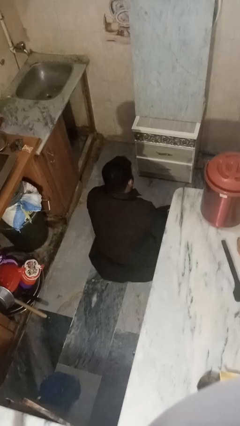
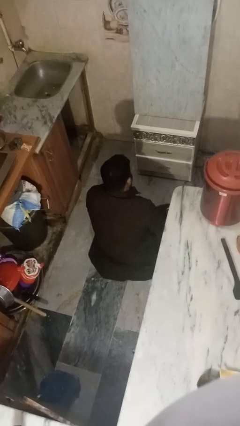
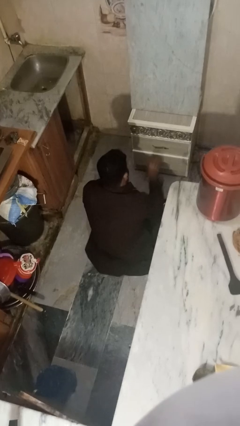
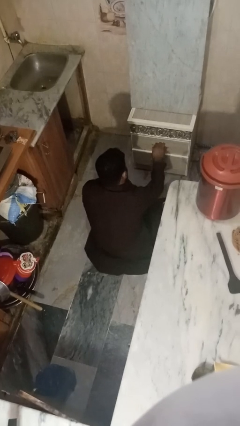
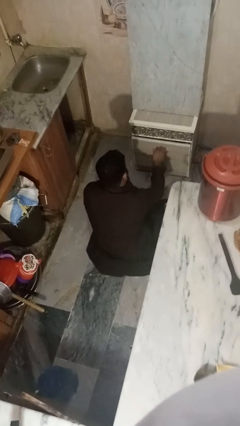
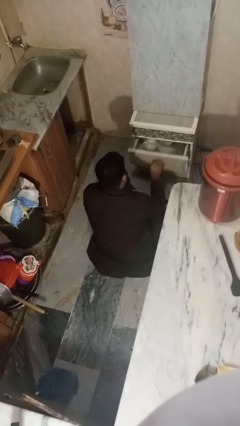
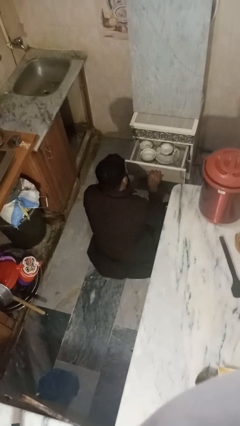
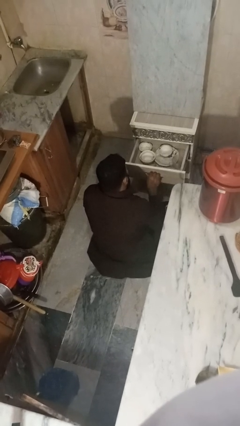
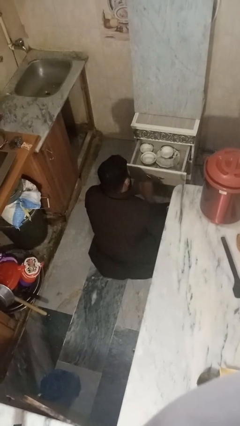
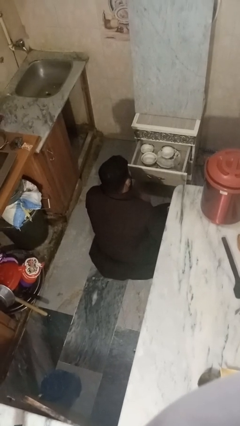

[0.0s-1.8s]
person opens kitchen drawer

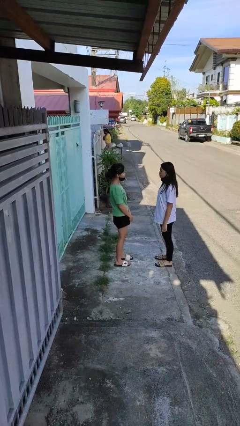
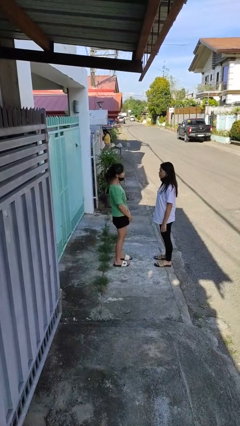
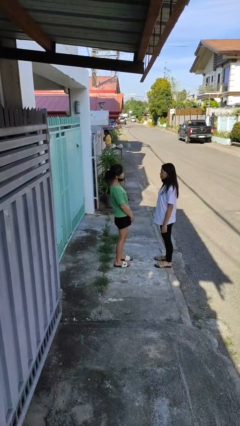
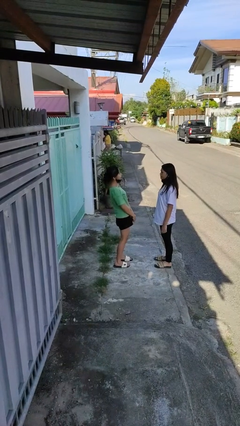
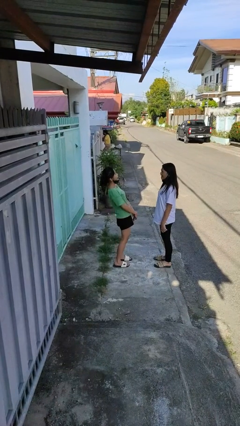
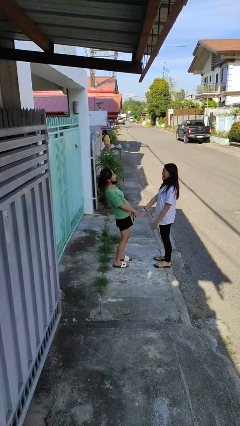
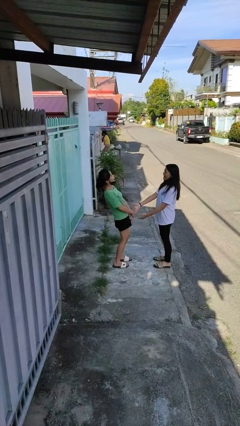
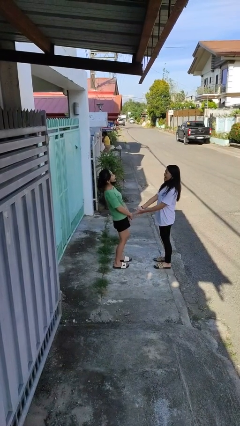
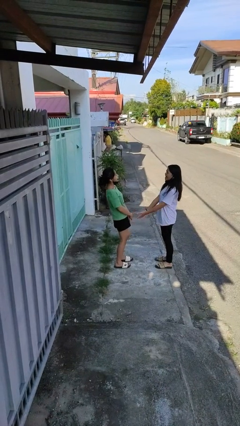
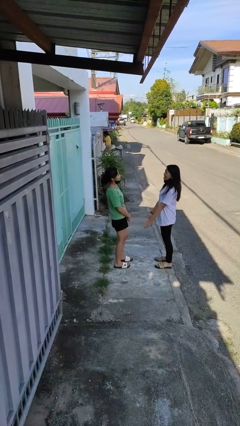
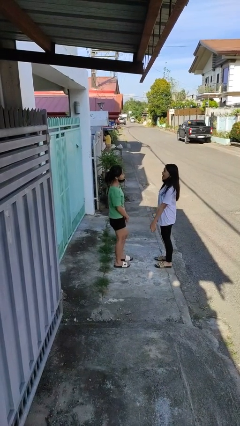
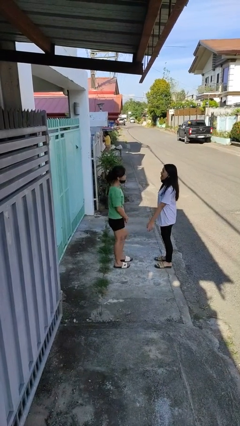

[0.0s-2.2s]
person laughs with person

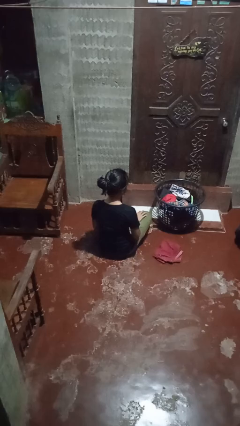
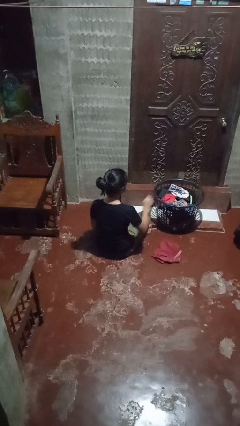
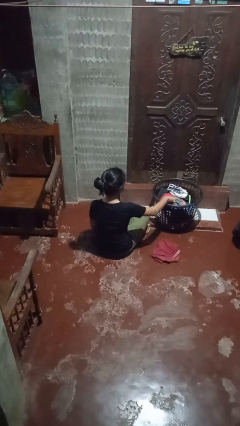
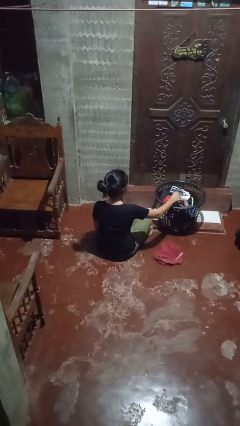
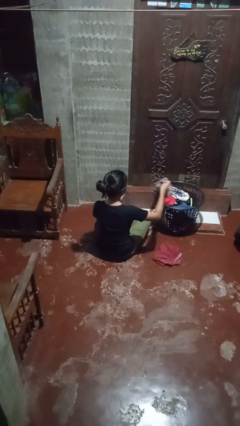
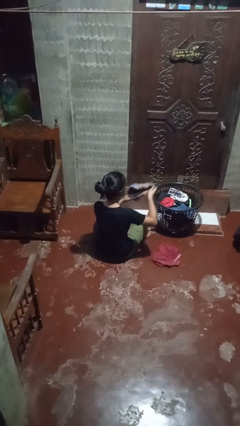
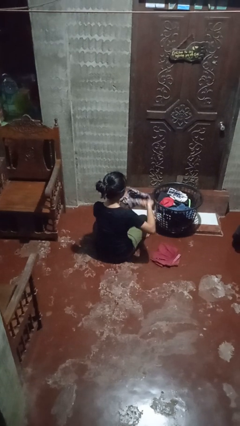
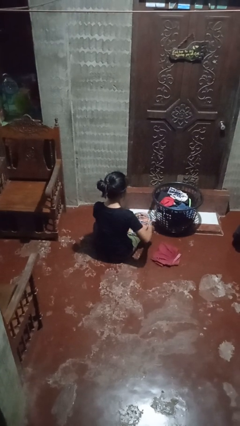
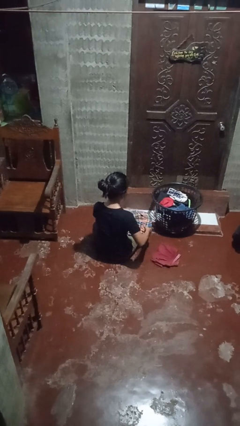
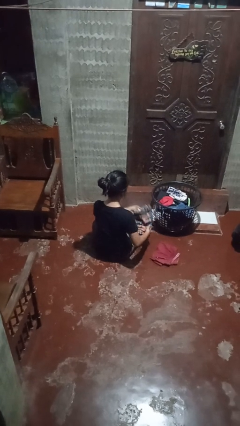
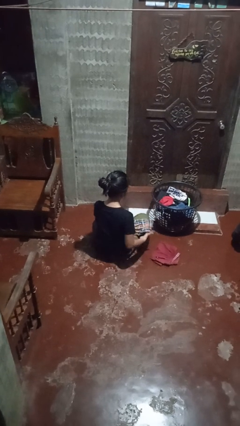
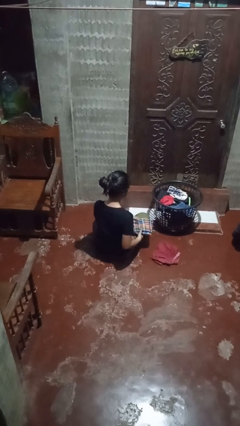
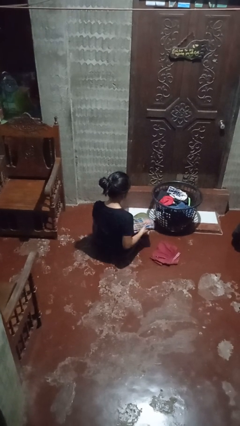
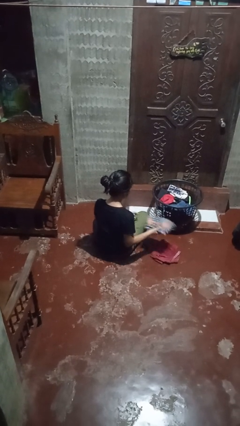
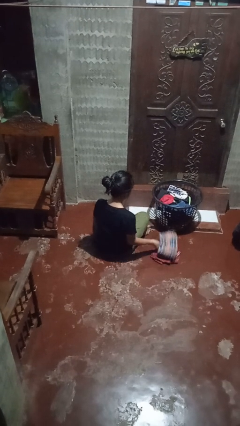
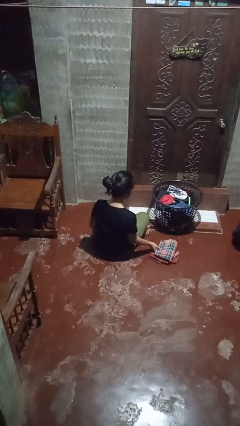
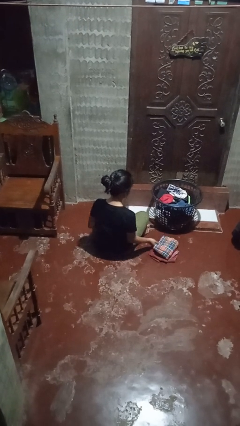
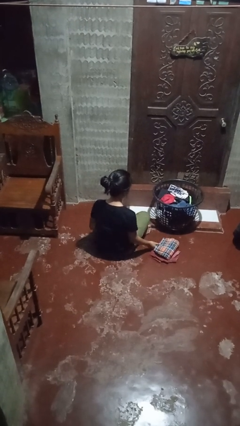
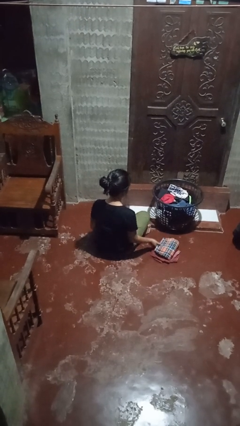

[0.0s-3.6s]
person folds pants

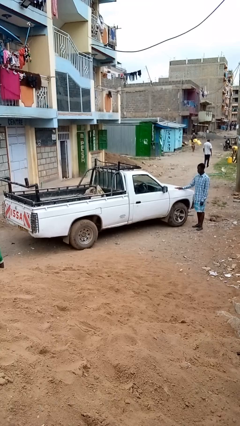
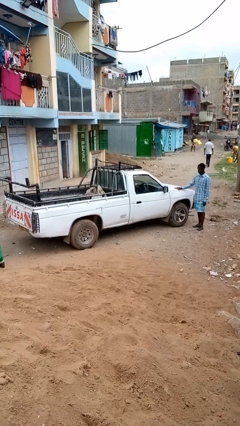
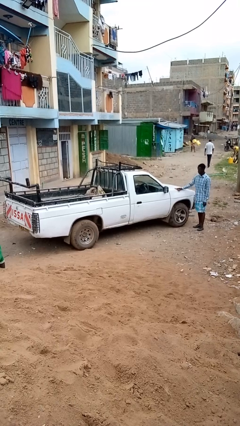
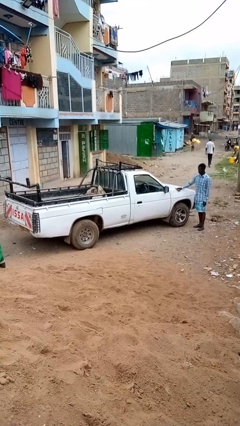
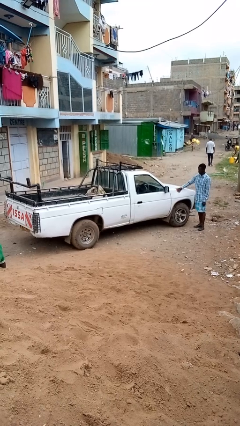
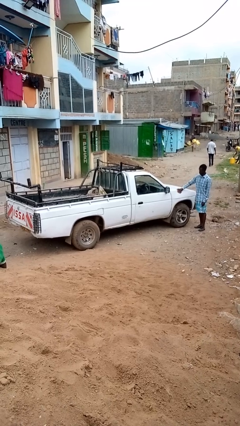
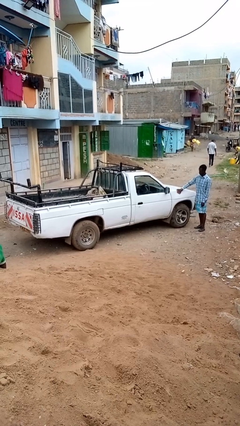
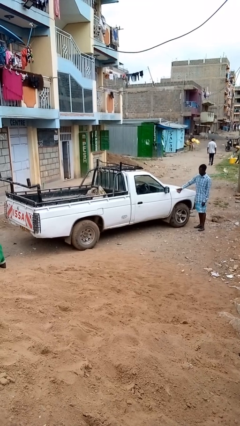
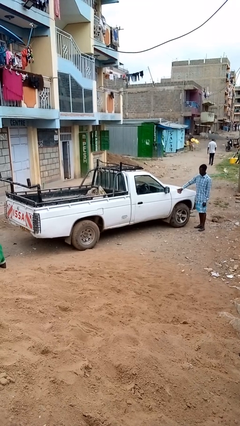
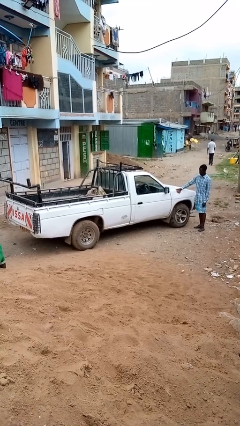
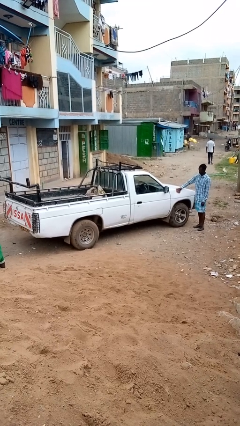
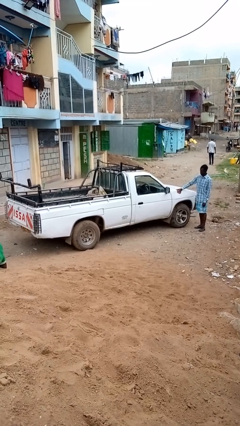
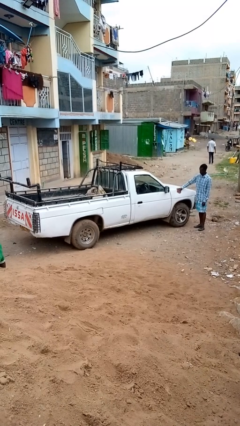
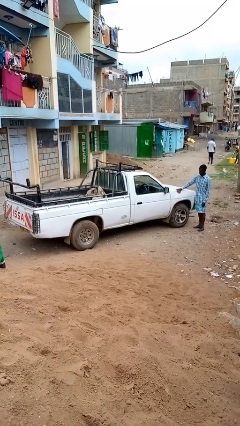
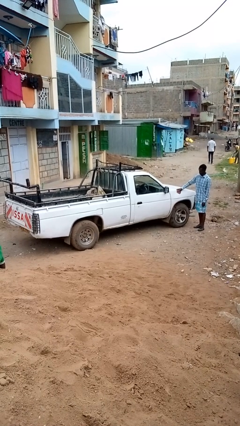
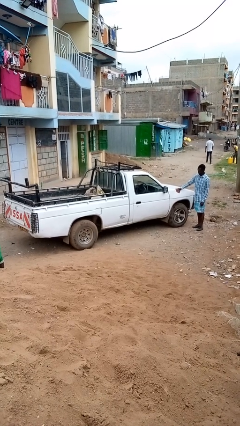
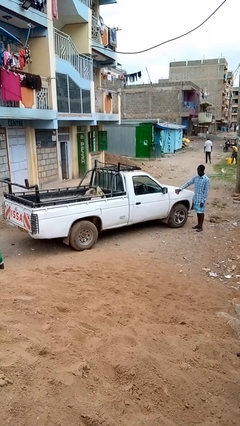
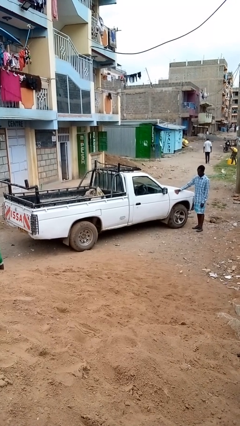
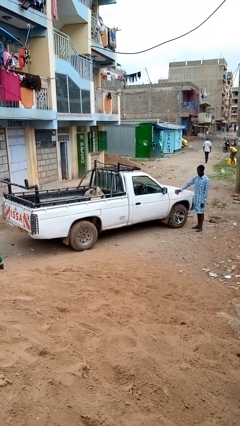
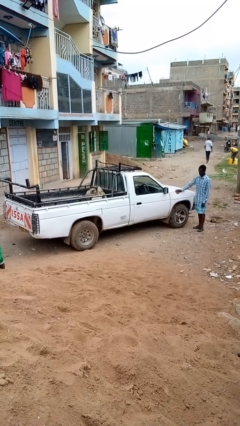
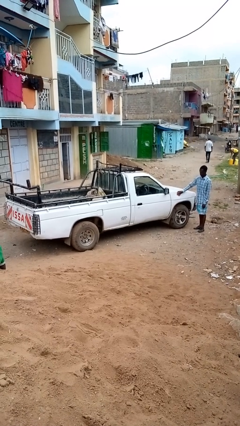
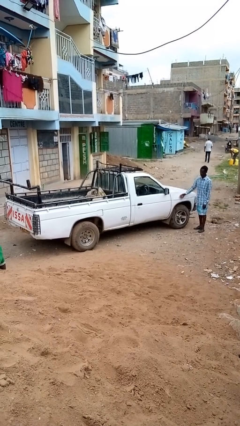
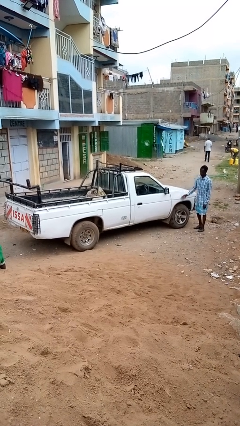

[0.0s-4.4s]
person polishes car with rag

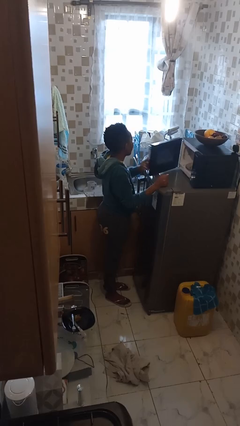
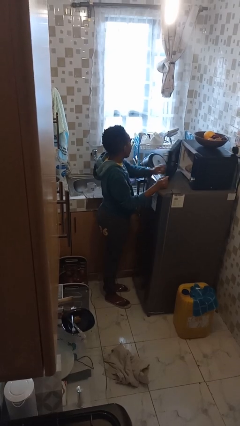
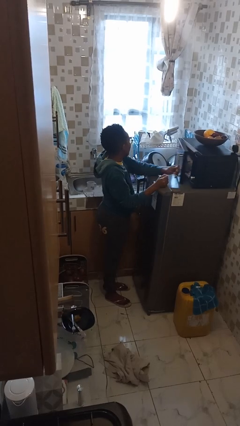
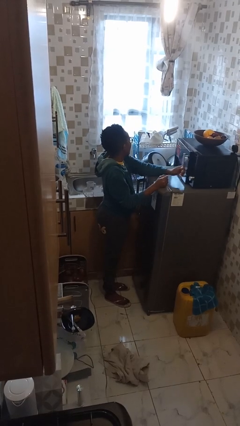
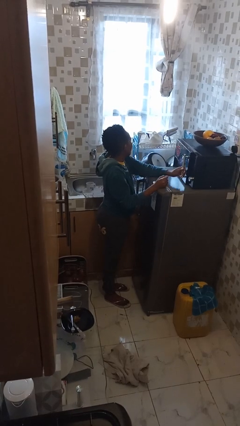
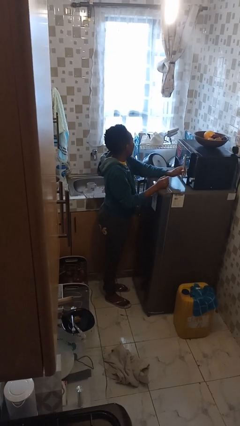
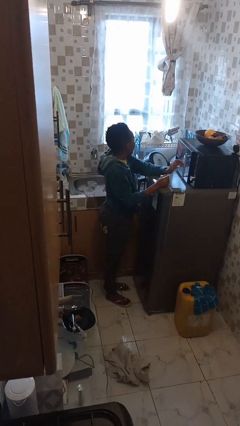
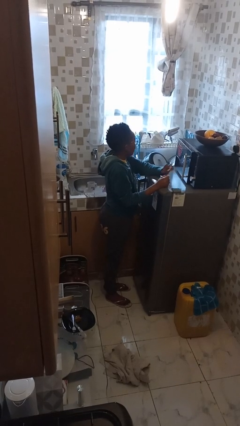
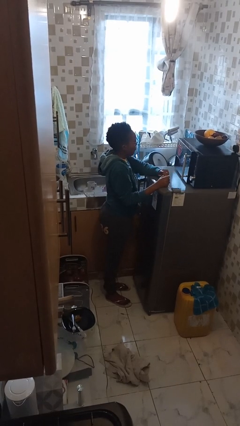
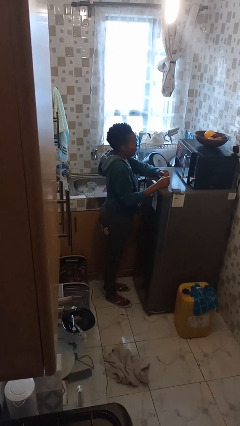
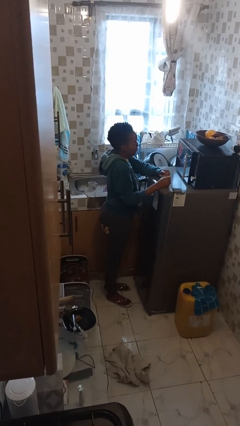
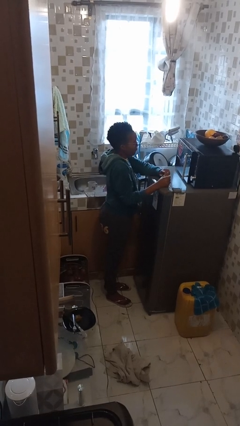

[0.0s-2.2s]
person closes microwave

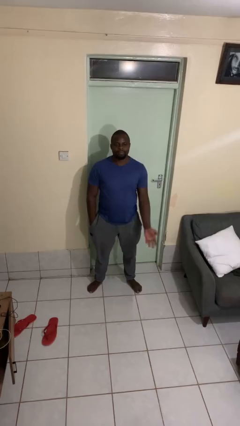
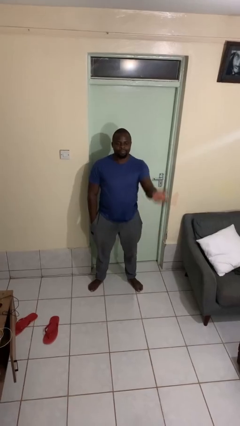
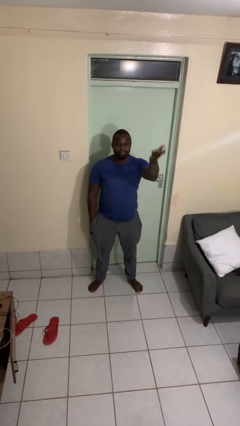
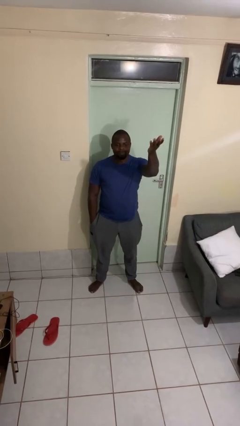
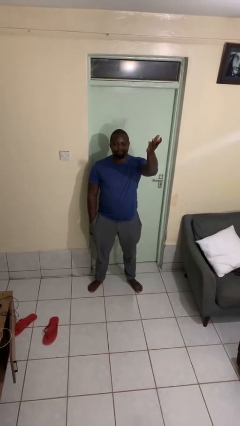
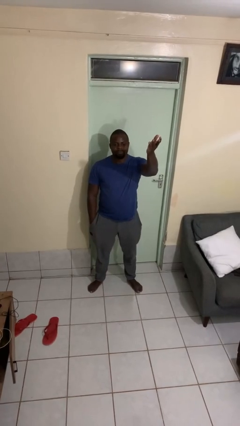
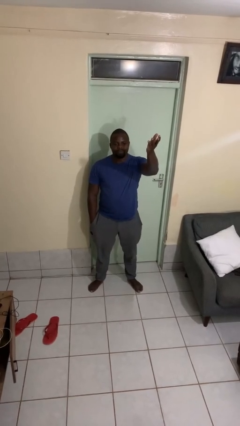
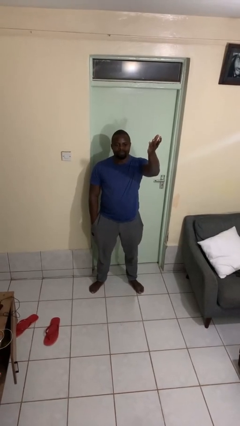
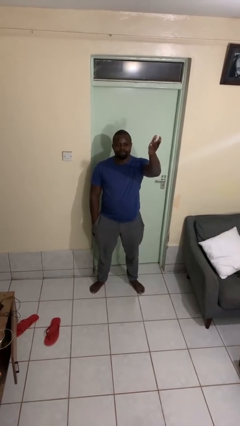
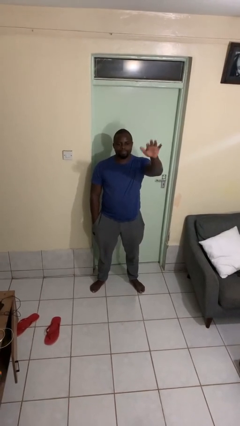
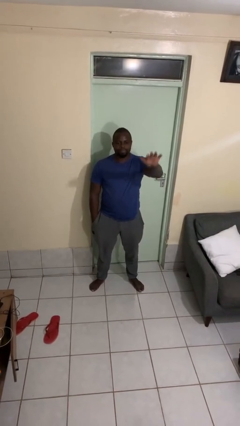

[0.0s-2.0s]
person gestures swipe up

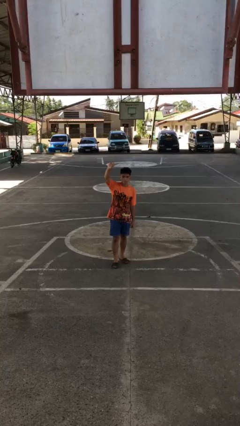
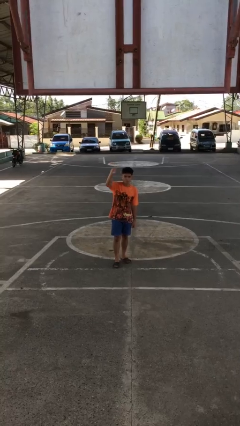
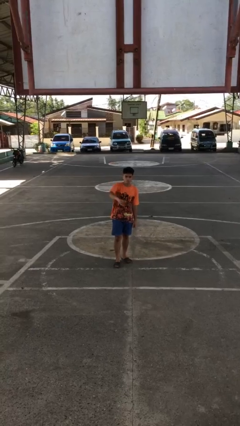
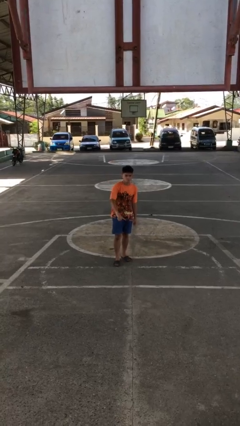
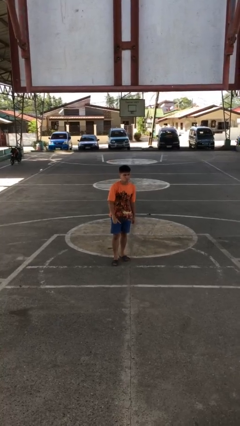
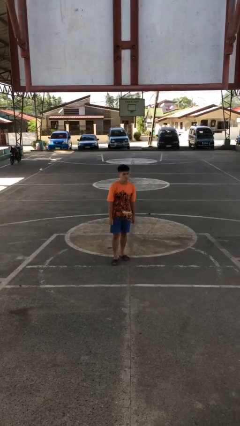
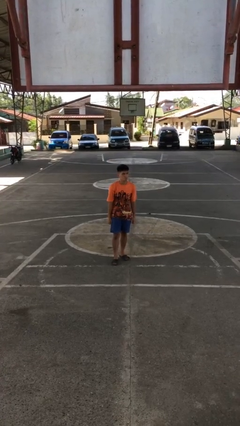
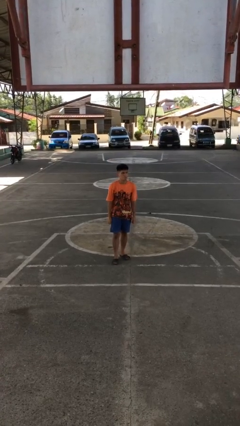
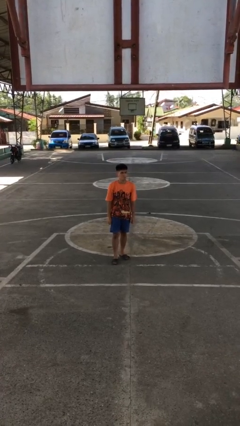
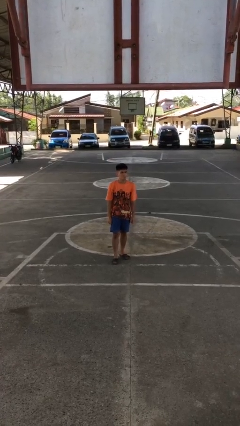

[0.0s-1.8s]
person gestures swipe down
